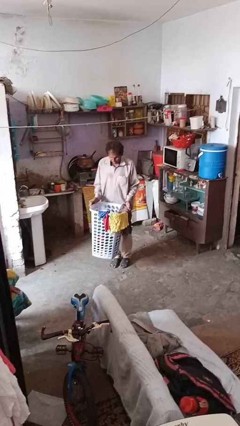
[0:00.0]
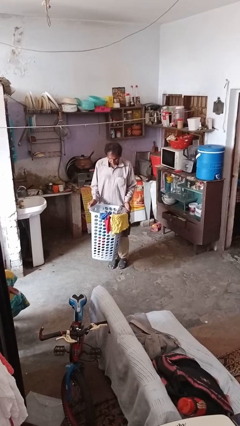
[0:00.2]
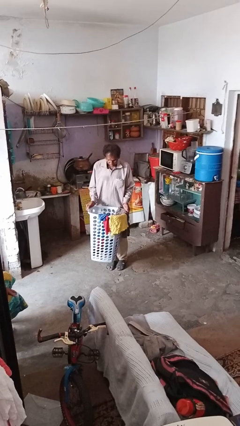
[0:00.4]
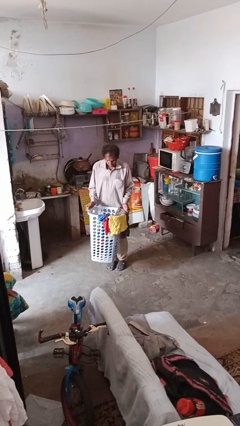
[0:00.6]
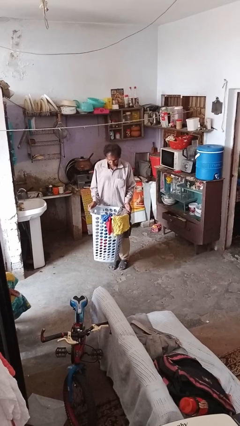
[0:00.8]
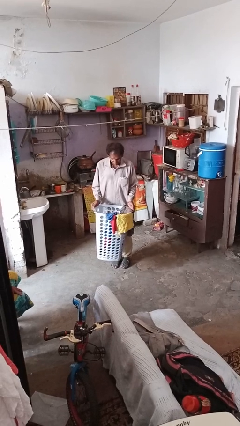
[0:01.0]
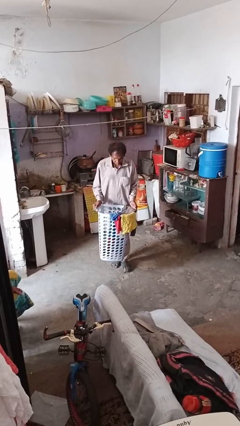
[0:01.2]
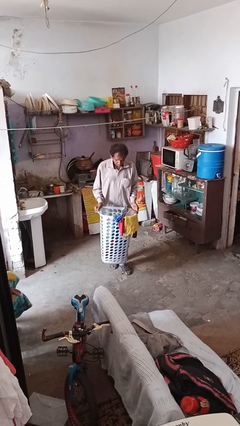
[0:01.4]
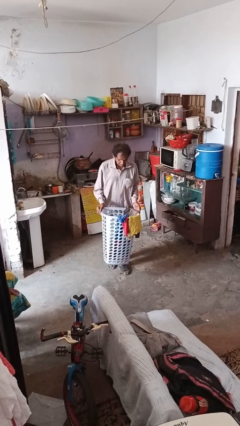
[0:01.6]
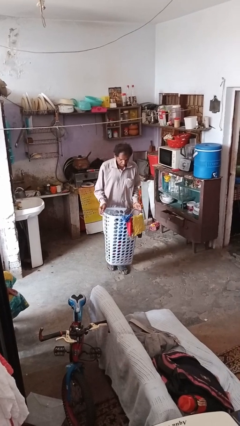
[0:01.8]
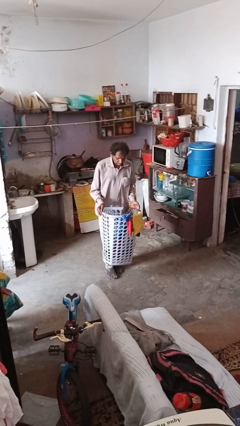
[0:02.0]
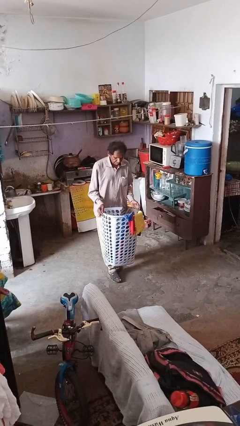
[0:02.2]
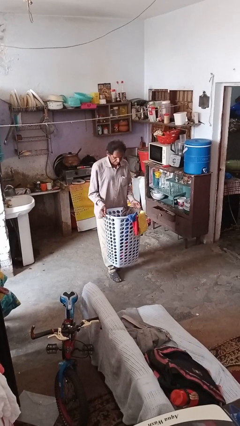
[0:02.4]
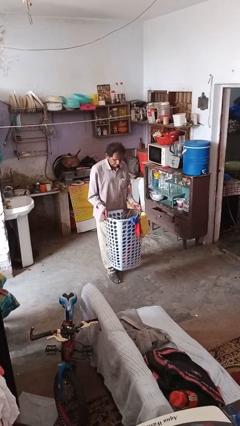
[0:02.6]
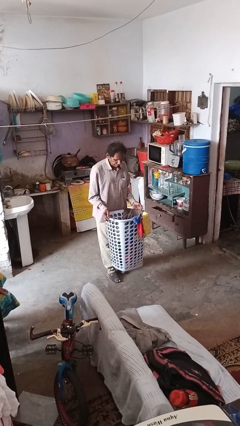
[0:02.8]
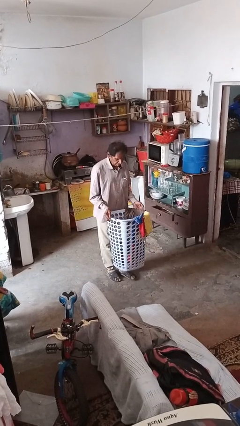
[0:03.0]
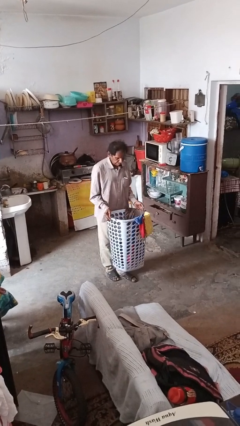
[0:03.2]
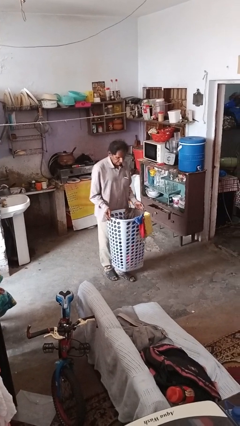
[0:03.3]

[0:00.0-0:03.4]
person carries laundry basket

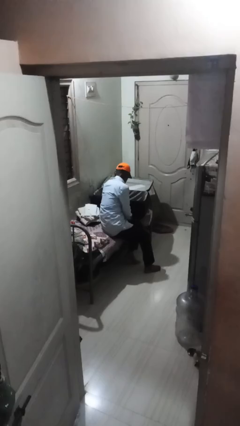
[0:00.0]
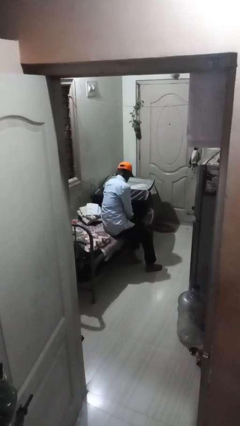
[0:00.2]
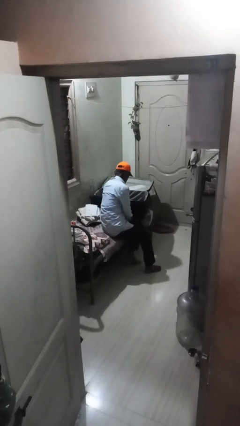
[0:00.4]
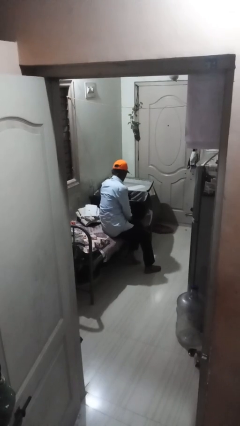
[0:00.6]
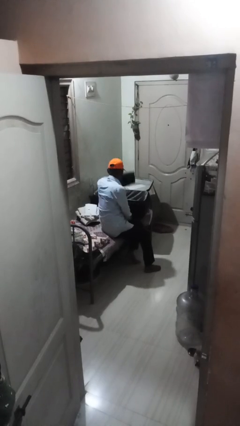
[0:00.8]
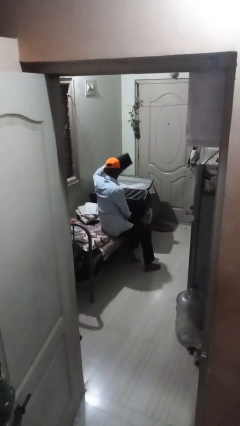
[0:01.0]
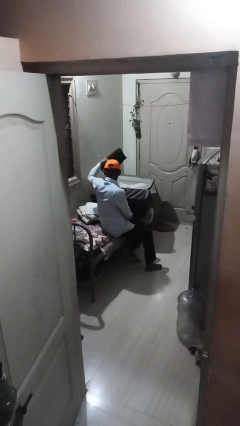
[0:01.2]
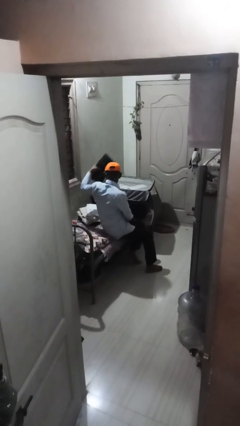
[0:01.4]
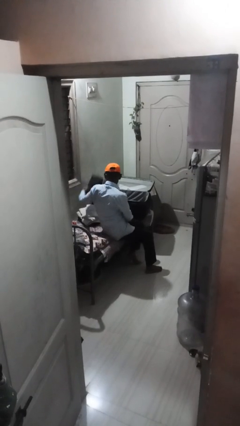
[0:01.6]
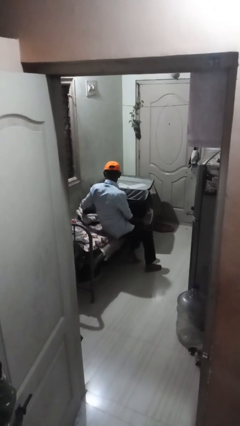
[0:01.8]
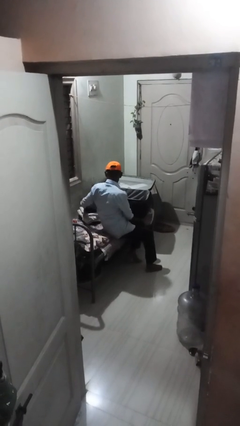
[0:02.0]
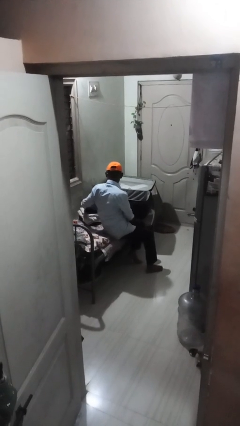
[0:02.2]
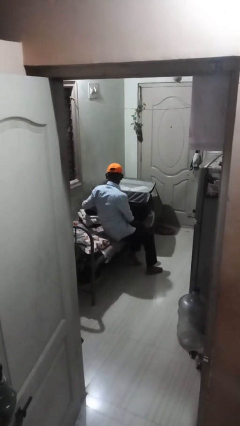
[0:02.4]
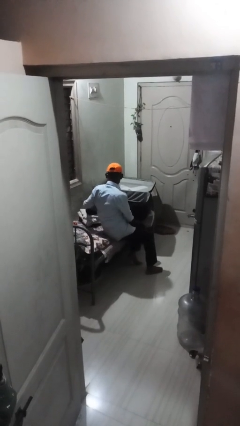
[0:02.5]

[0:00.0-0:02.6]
person unloads clothes from suitcase

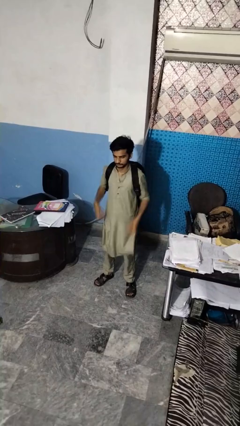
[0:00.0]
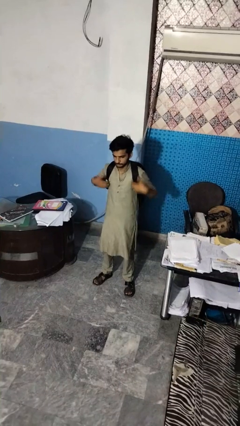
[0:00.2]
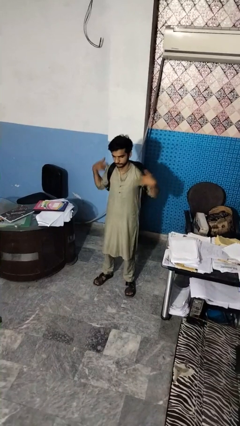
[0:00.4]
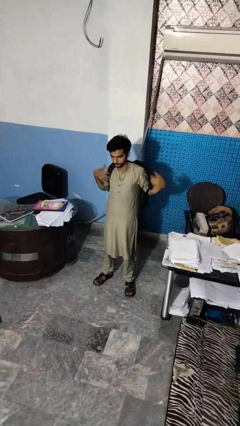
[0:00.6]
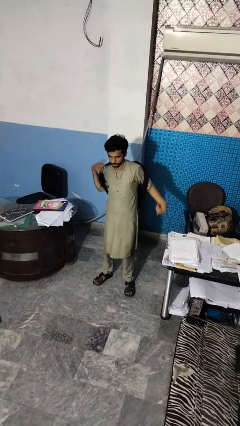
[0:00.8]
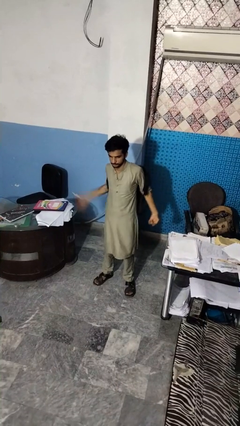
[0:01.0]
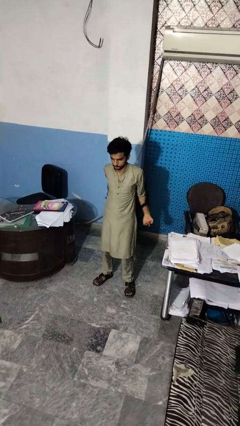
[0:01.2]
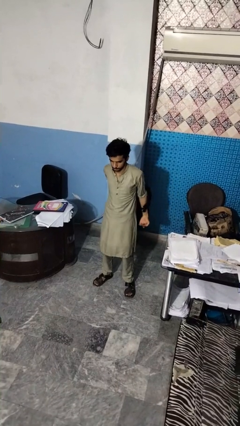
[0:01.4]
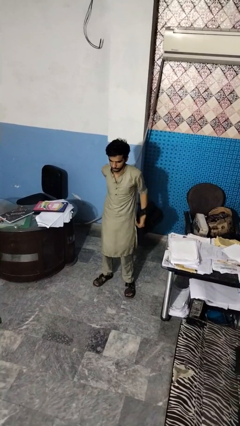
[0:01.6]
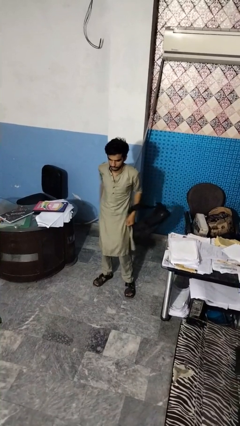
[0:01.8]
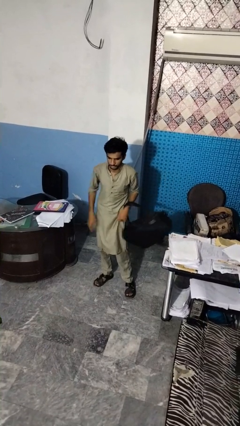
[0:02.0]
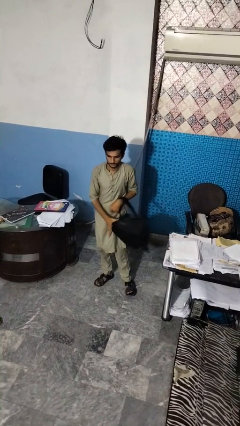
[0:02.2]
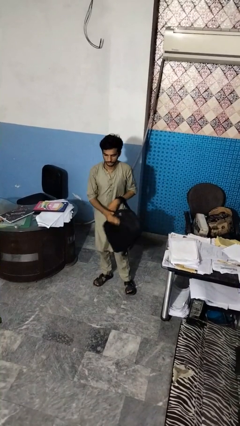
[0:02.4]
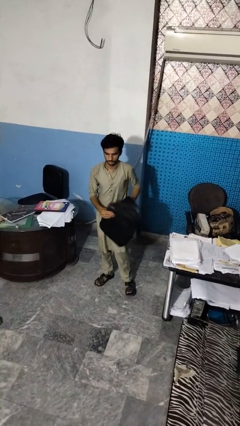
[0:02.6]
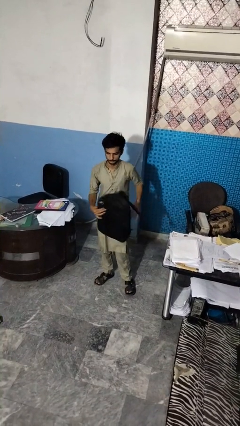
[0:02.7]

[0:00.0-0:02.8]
person takes off backpack

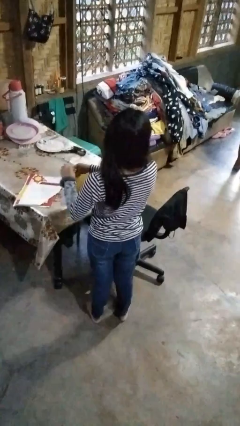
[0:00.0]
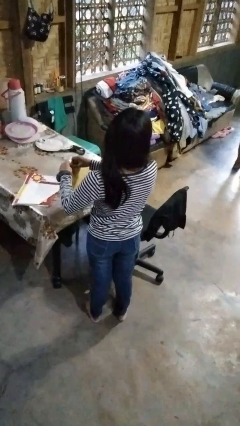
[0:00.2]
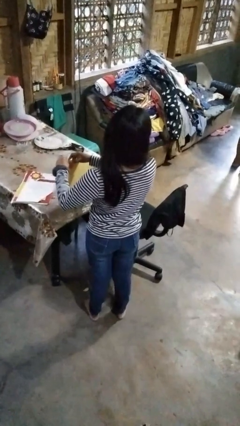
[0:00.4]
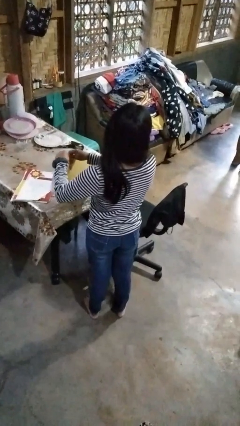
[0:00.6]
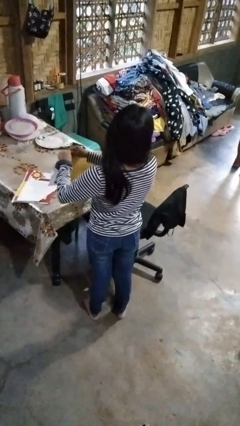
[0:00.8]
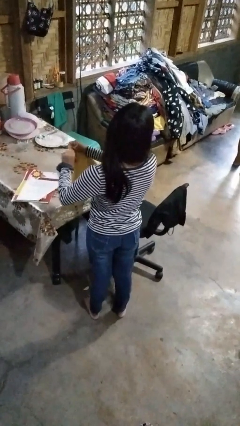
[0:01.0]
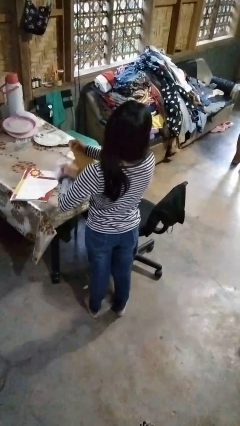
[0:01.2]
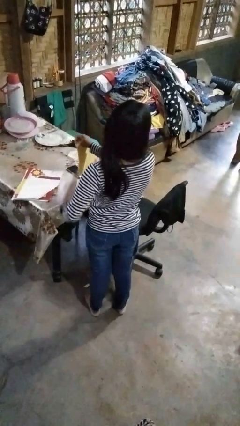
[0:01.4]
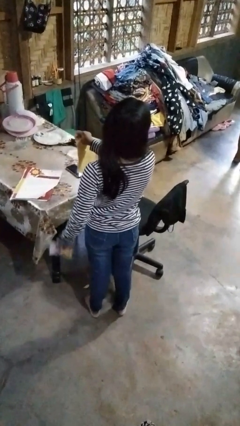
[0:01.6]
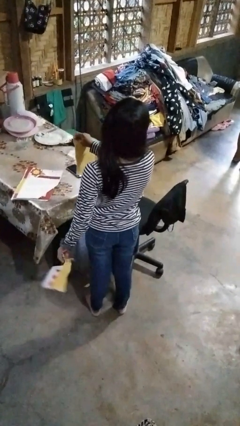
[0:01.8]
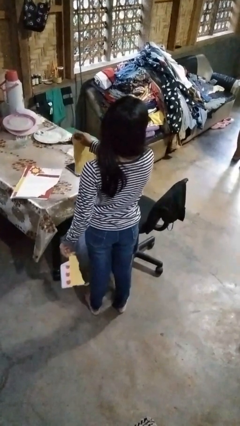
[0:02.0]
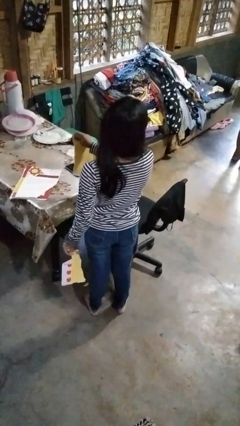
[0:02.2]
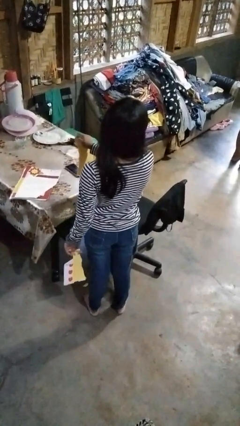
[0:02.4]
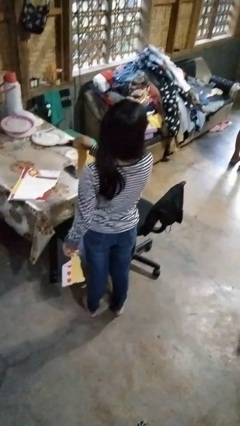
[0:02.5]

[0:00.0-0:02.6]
person tears paper

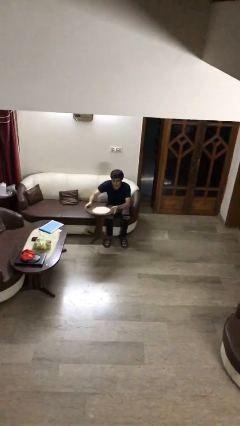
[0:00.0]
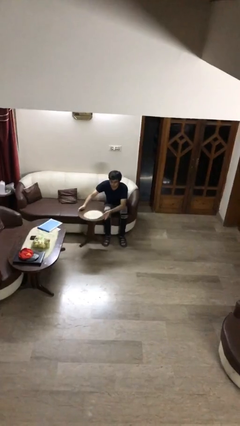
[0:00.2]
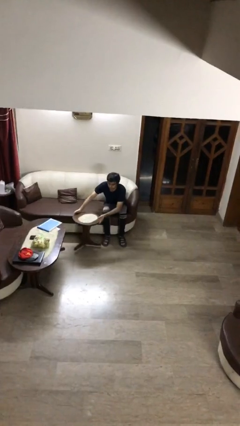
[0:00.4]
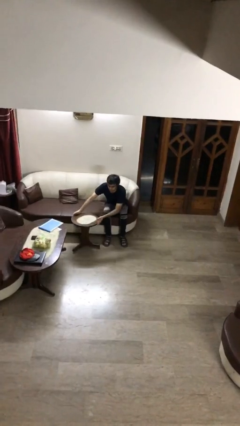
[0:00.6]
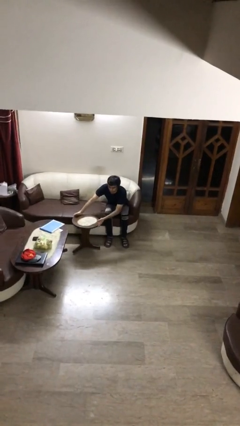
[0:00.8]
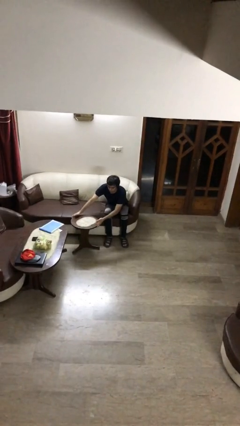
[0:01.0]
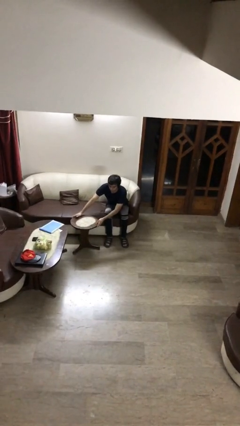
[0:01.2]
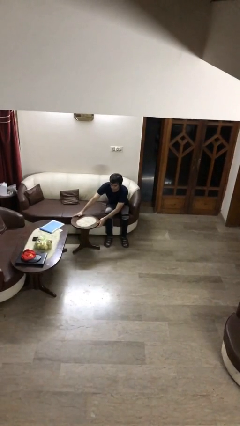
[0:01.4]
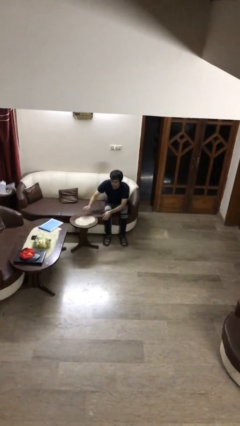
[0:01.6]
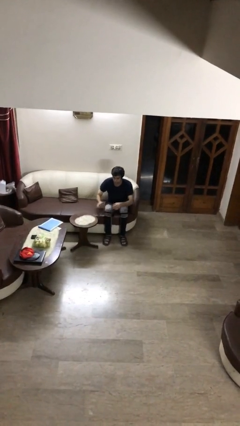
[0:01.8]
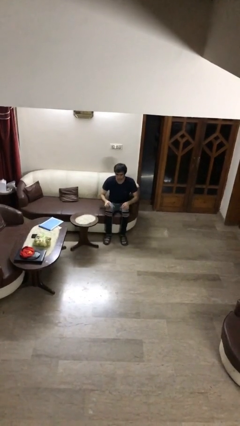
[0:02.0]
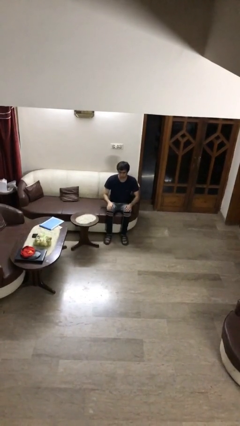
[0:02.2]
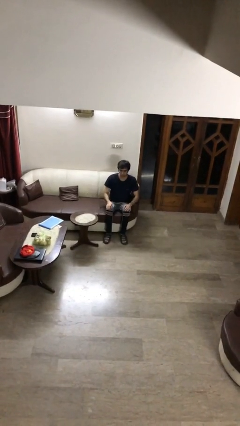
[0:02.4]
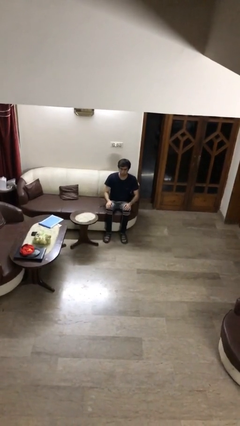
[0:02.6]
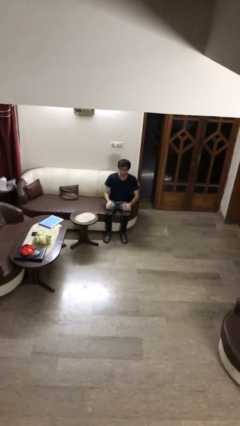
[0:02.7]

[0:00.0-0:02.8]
person puts down object on floor

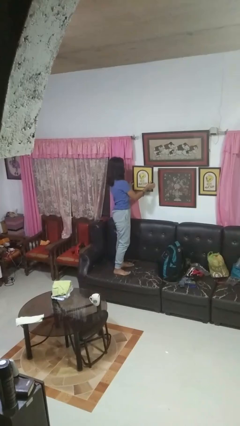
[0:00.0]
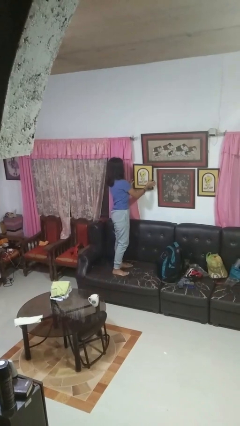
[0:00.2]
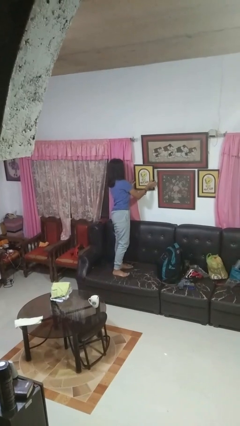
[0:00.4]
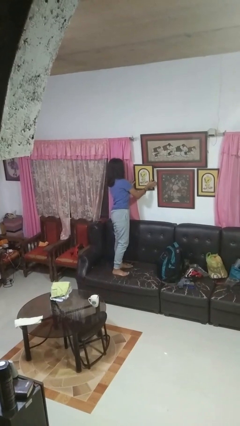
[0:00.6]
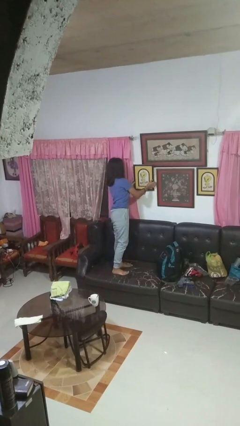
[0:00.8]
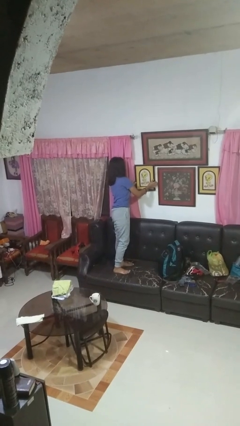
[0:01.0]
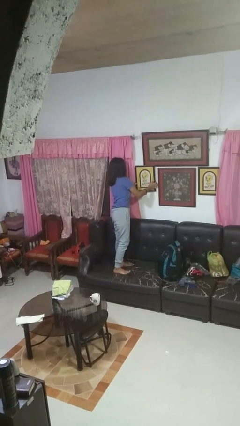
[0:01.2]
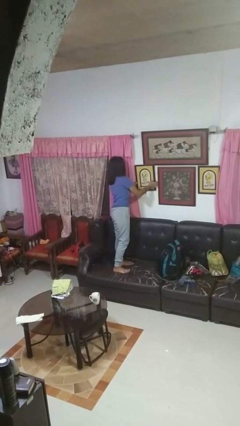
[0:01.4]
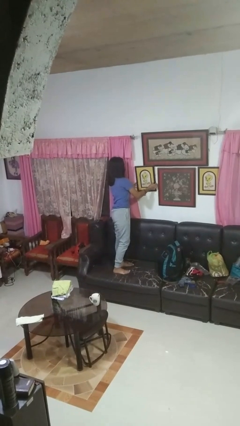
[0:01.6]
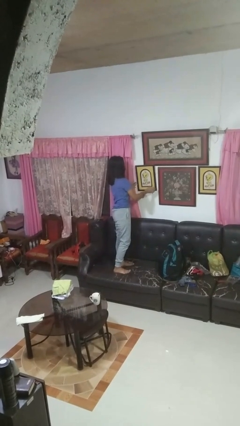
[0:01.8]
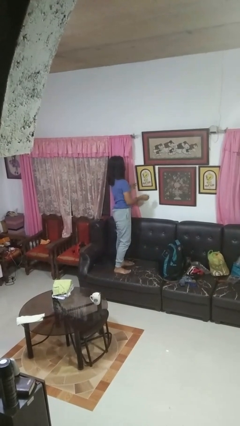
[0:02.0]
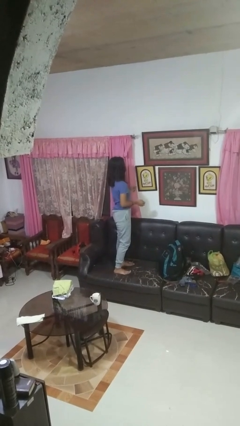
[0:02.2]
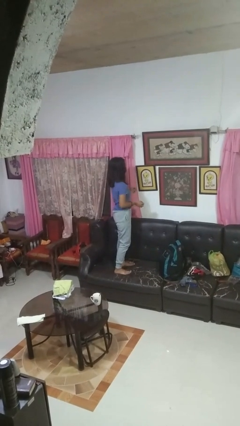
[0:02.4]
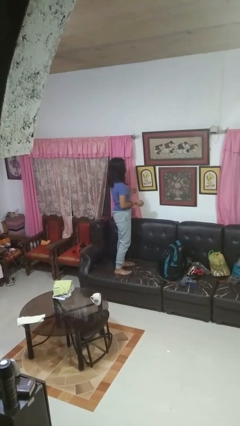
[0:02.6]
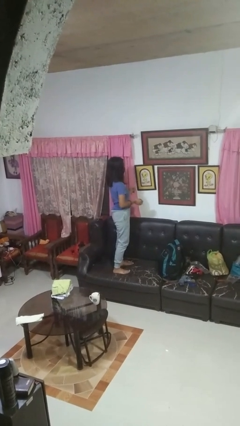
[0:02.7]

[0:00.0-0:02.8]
person puts up picture frame

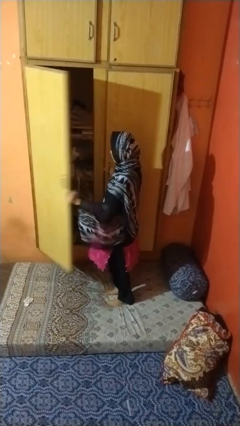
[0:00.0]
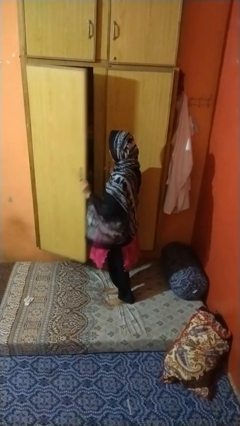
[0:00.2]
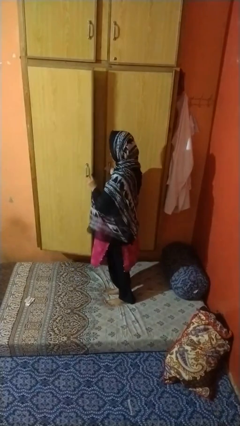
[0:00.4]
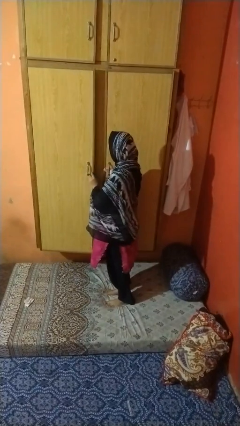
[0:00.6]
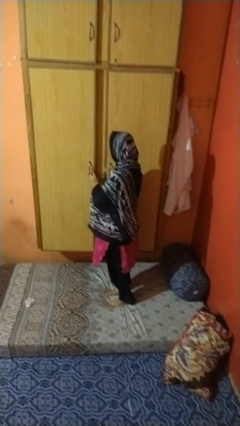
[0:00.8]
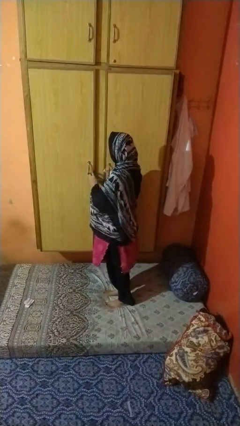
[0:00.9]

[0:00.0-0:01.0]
person closes closet door
